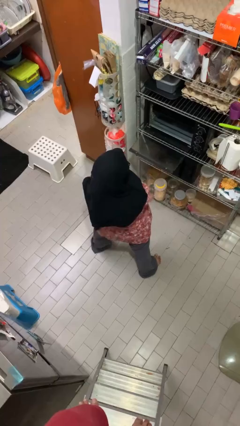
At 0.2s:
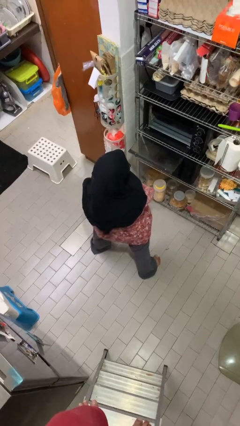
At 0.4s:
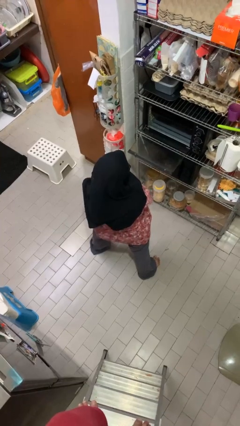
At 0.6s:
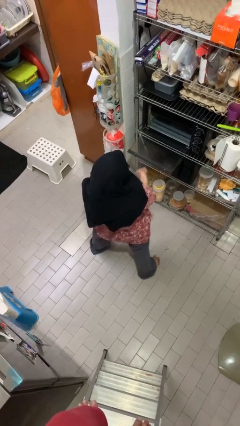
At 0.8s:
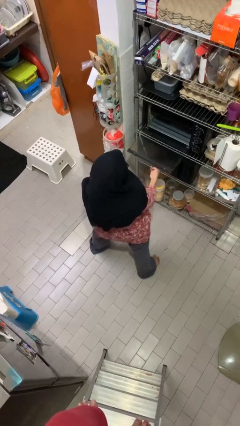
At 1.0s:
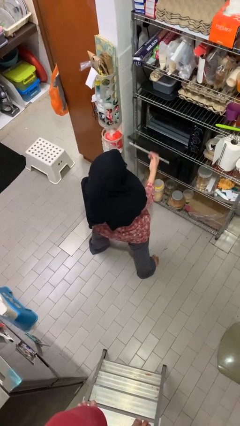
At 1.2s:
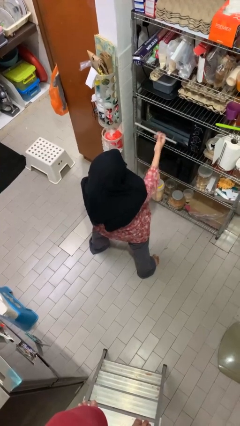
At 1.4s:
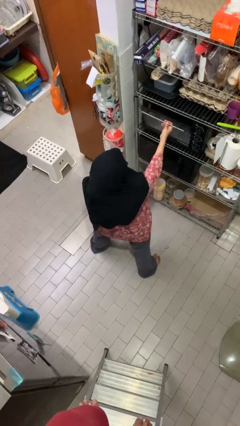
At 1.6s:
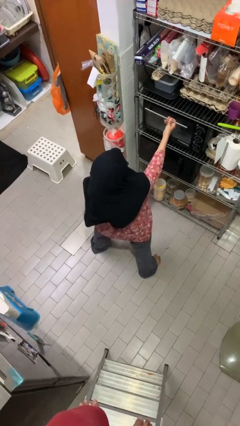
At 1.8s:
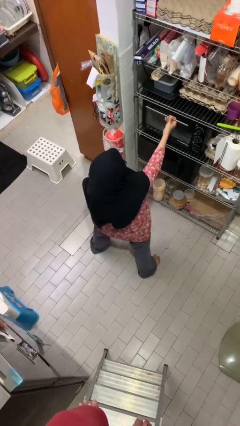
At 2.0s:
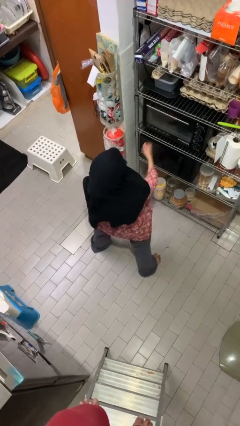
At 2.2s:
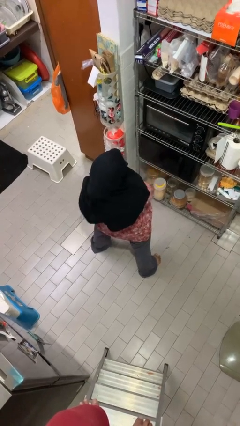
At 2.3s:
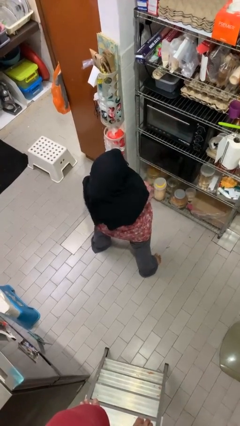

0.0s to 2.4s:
person closes oven door

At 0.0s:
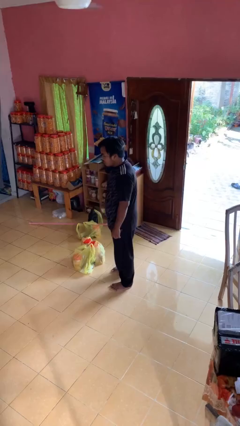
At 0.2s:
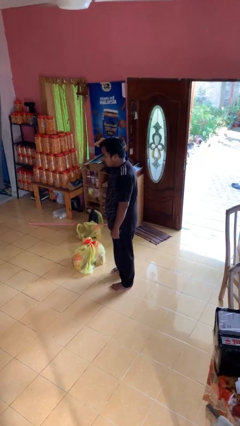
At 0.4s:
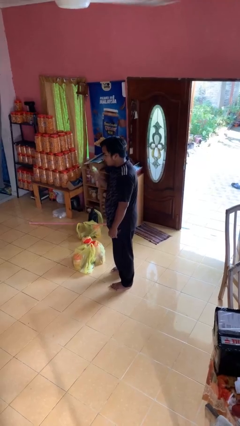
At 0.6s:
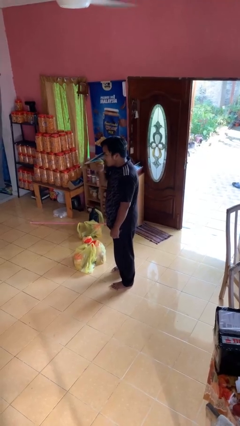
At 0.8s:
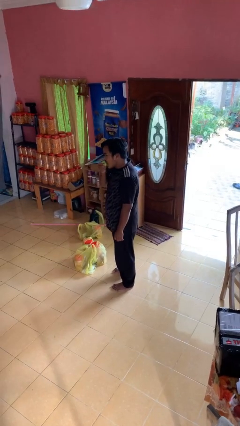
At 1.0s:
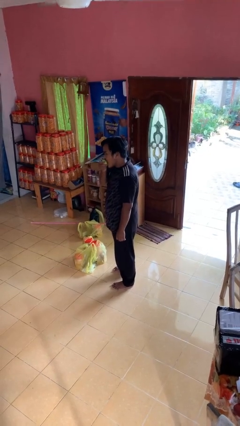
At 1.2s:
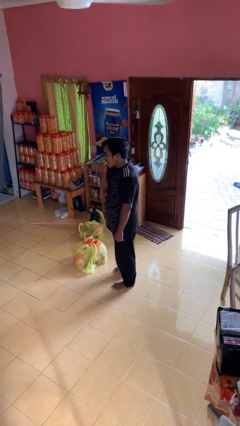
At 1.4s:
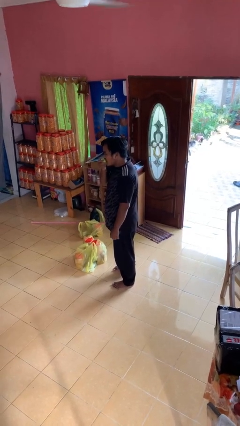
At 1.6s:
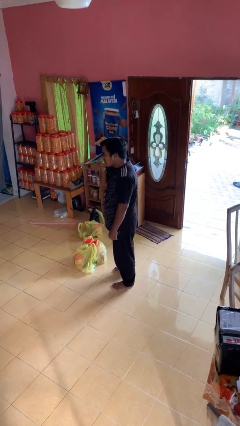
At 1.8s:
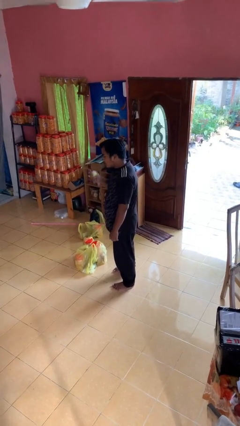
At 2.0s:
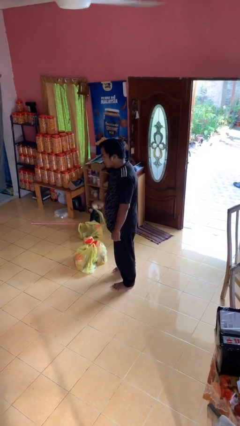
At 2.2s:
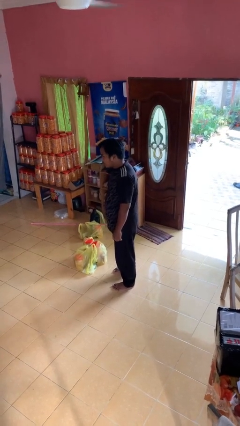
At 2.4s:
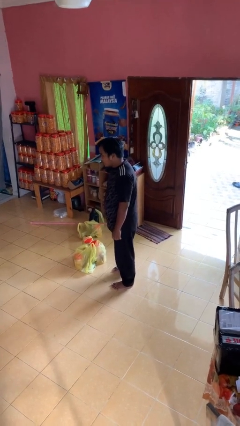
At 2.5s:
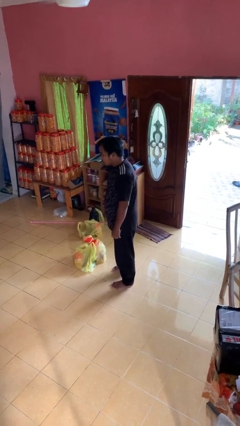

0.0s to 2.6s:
person eats apple

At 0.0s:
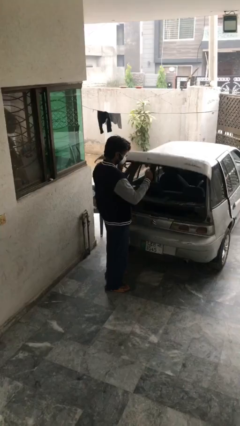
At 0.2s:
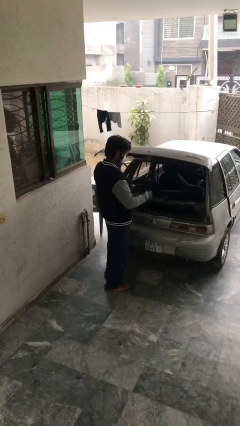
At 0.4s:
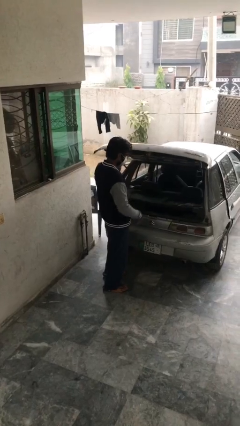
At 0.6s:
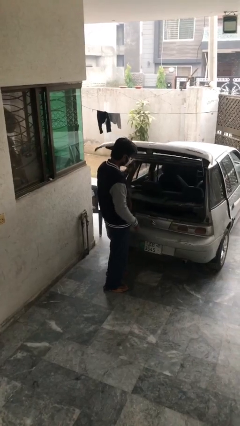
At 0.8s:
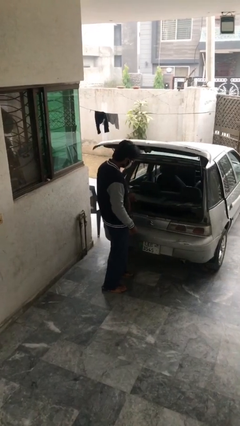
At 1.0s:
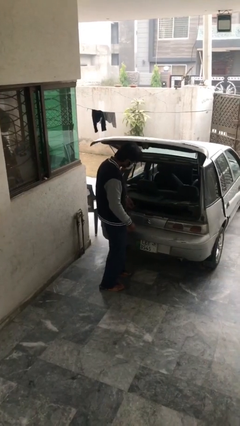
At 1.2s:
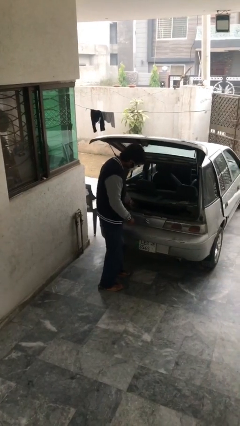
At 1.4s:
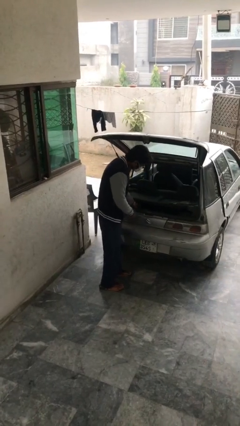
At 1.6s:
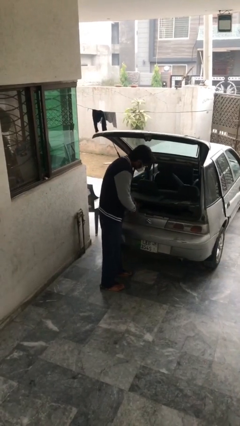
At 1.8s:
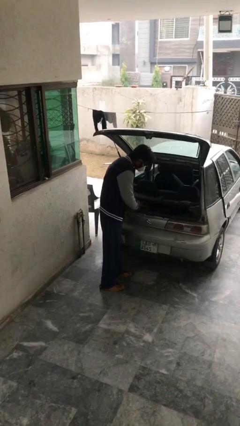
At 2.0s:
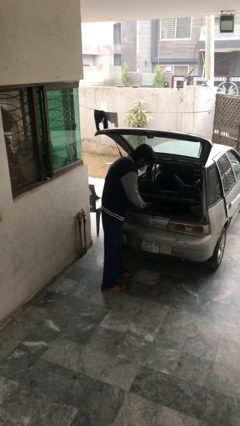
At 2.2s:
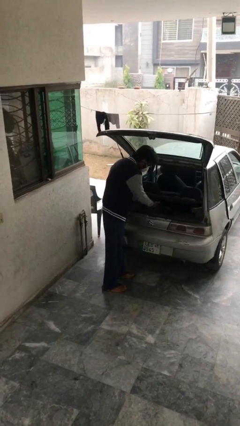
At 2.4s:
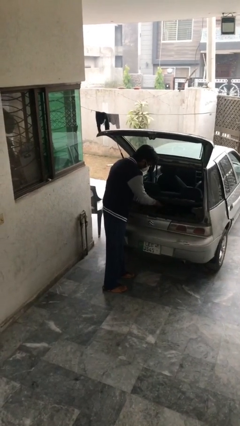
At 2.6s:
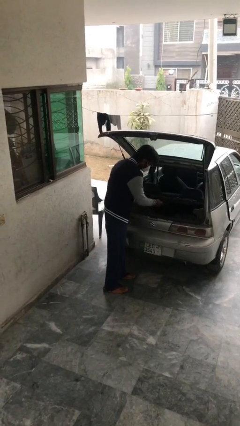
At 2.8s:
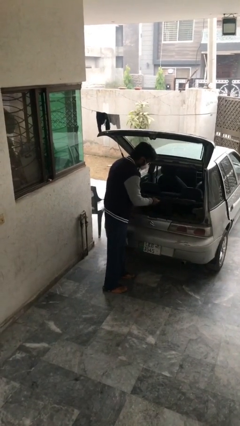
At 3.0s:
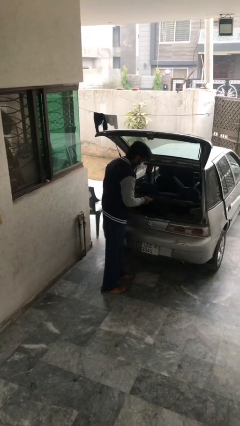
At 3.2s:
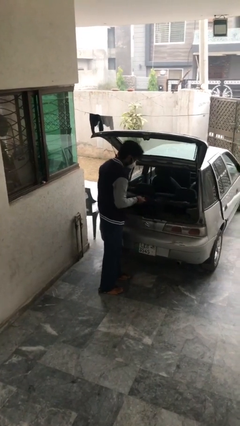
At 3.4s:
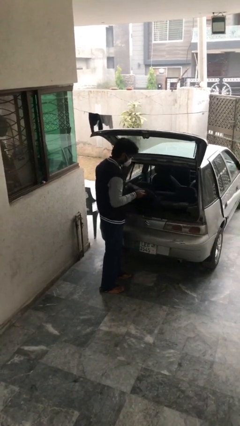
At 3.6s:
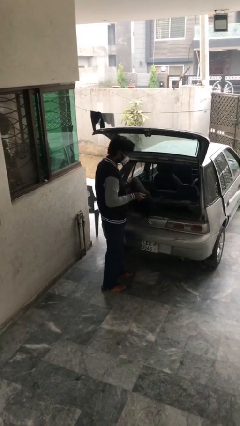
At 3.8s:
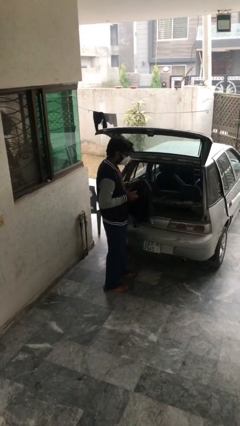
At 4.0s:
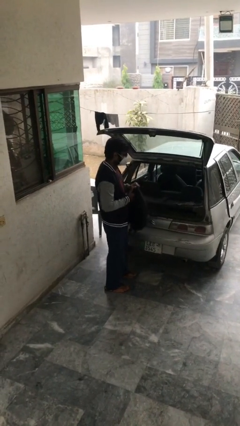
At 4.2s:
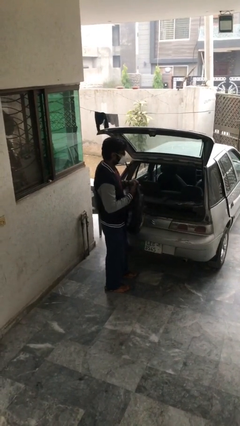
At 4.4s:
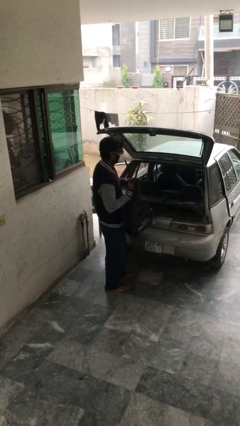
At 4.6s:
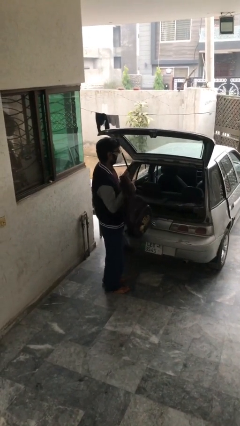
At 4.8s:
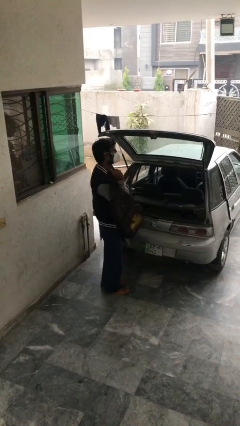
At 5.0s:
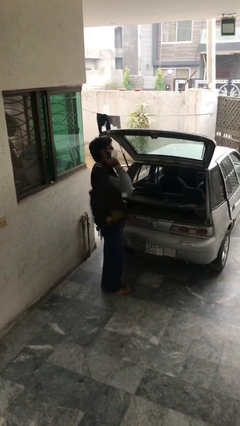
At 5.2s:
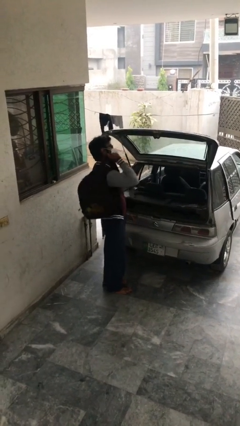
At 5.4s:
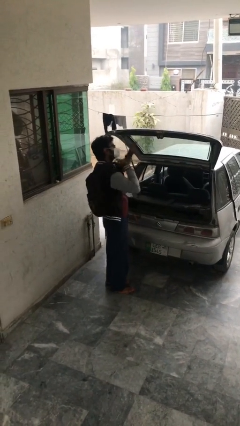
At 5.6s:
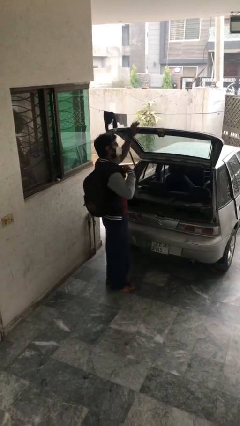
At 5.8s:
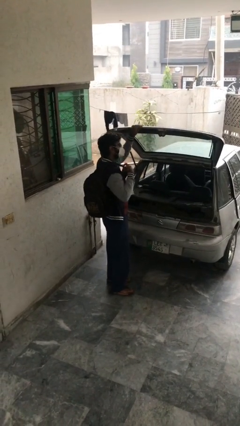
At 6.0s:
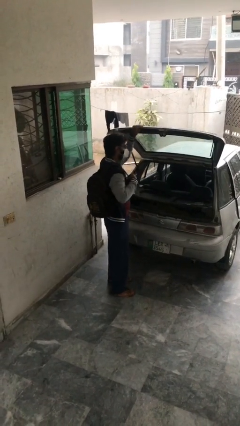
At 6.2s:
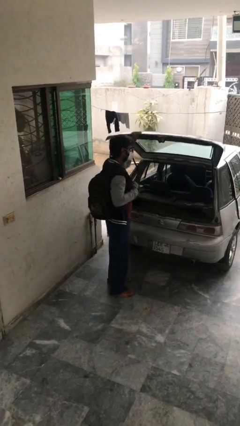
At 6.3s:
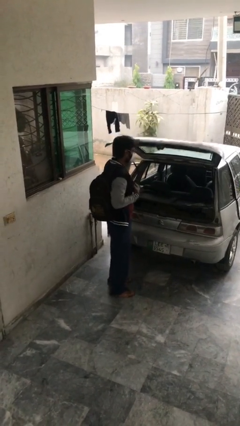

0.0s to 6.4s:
person unloads car

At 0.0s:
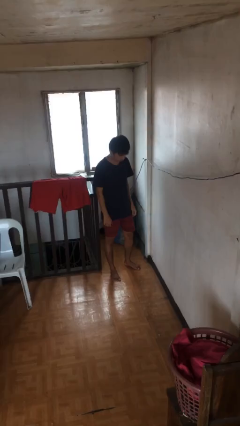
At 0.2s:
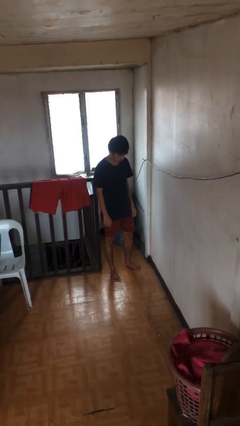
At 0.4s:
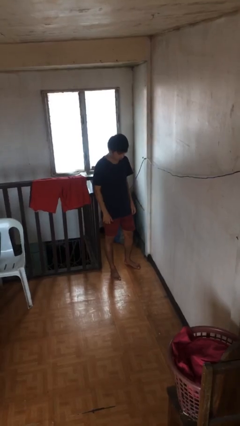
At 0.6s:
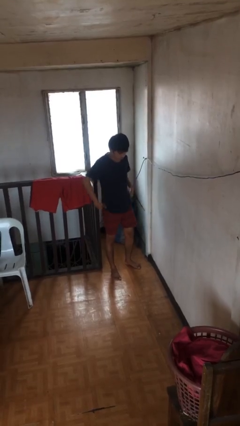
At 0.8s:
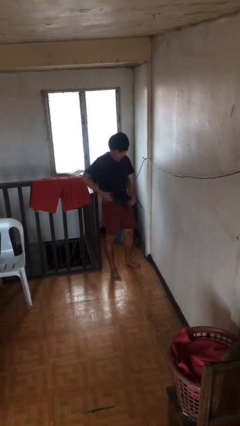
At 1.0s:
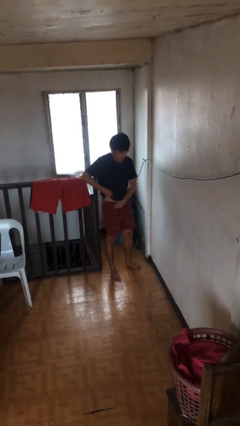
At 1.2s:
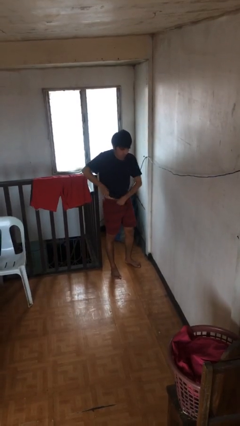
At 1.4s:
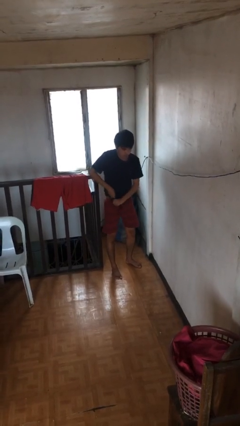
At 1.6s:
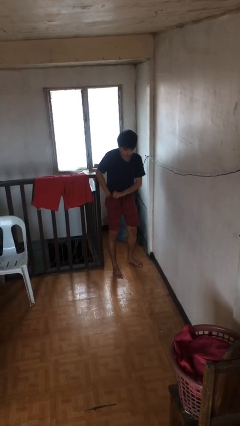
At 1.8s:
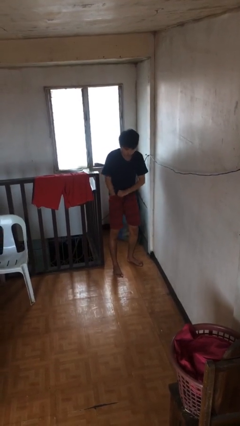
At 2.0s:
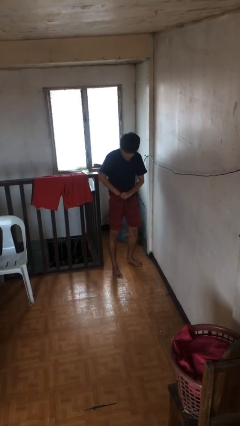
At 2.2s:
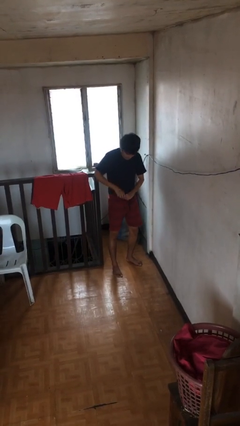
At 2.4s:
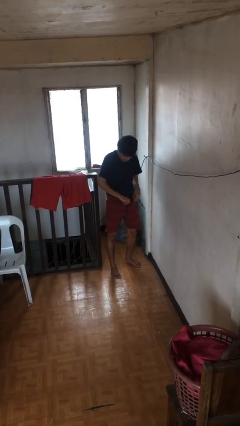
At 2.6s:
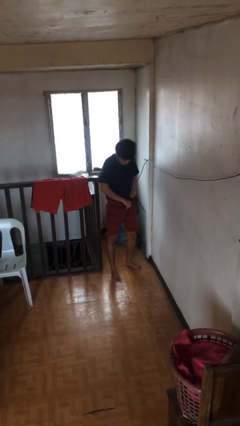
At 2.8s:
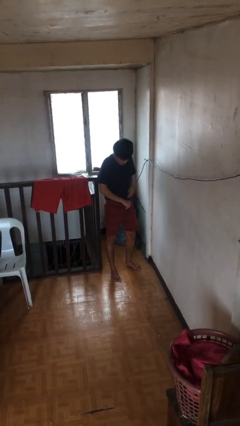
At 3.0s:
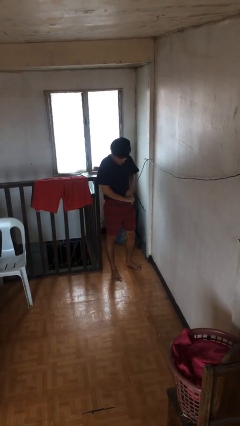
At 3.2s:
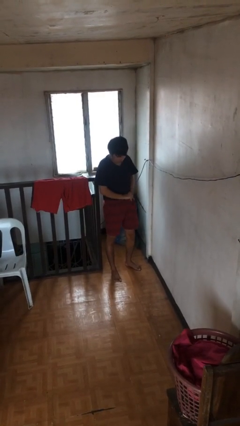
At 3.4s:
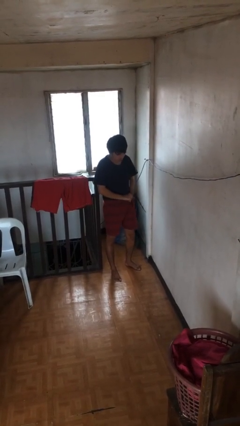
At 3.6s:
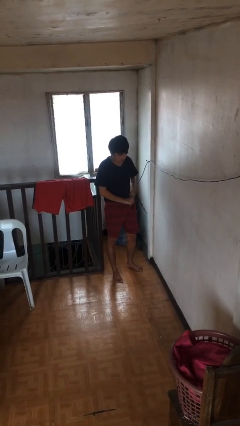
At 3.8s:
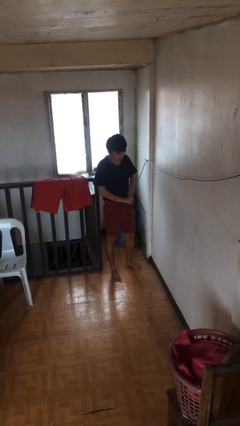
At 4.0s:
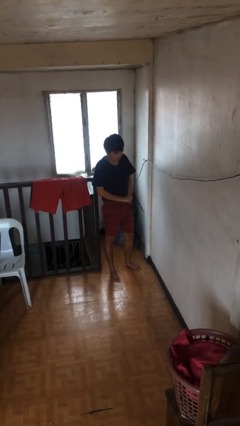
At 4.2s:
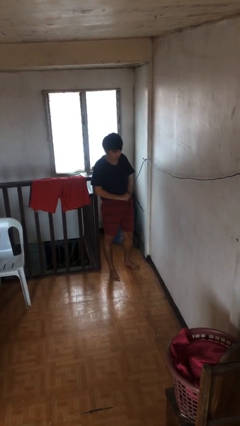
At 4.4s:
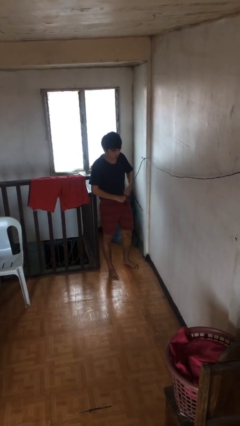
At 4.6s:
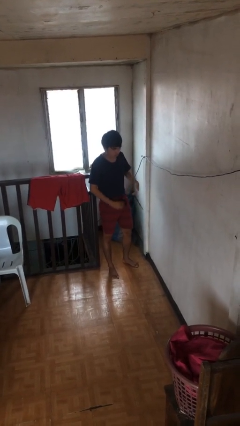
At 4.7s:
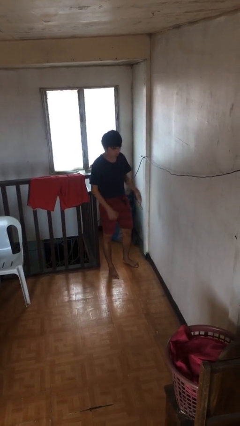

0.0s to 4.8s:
person tucks in shirt

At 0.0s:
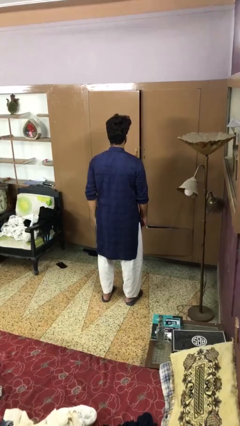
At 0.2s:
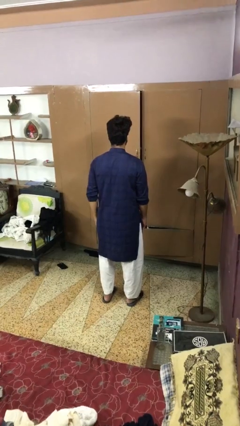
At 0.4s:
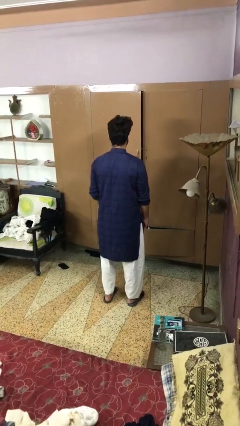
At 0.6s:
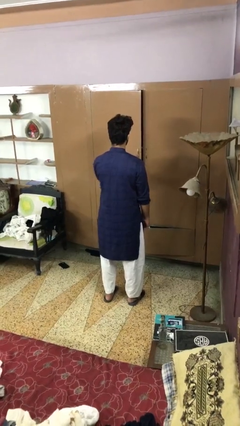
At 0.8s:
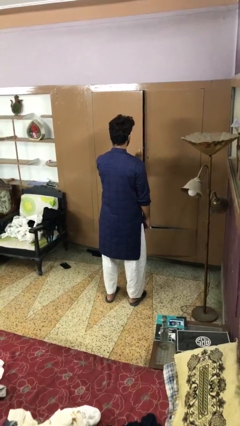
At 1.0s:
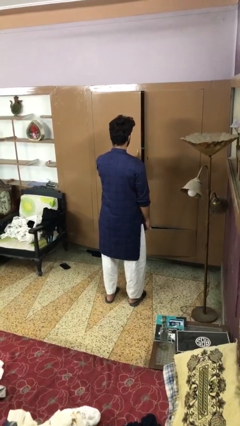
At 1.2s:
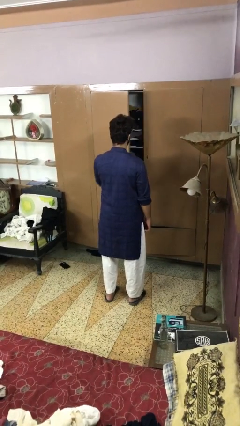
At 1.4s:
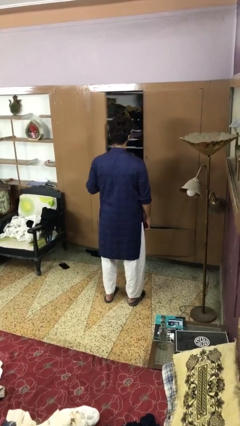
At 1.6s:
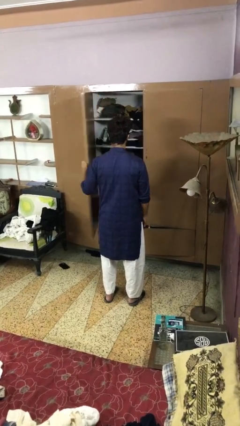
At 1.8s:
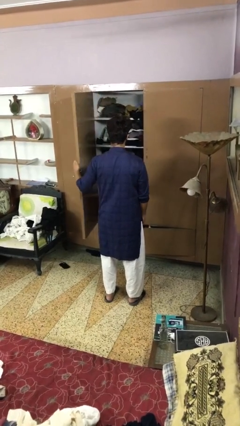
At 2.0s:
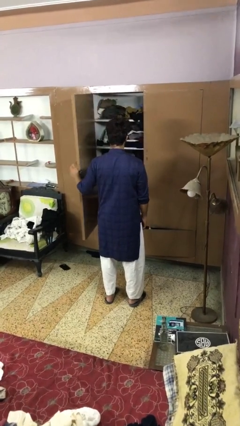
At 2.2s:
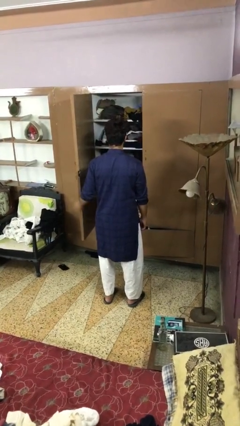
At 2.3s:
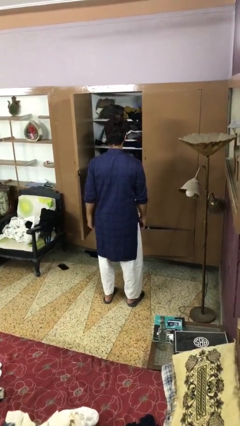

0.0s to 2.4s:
person opens closet door
